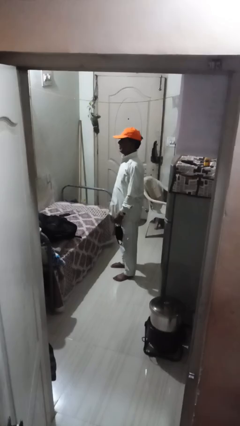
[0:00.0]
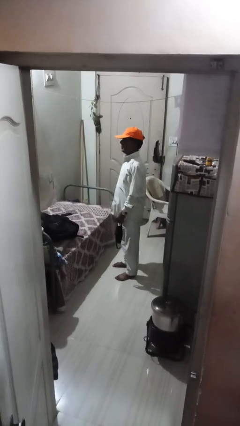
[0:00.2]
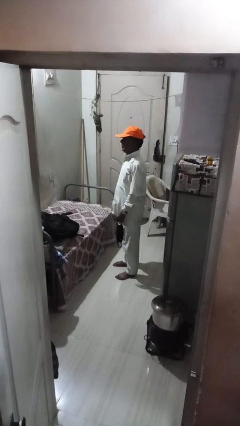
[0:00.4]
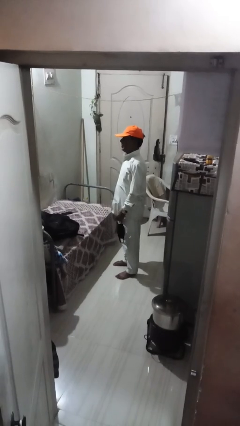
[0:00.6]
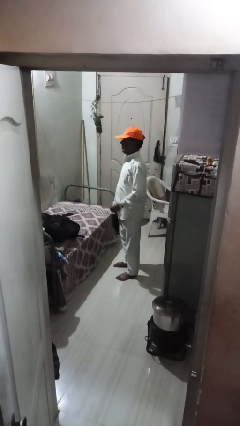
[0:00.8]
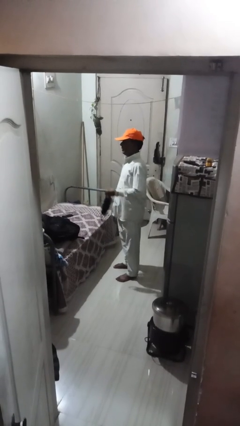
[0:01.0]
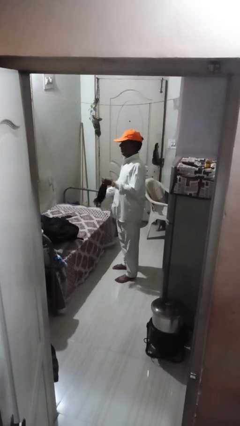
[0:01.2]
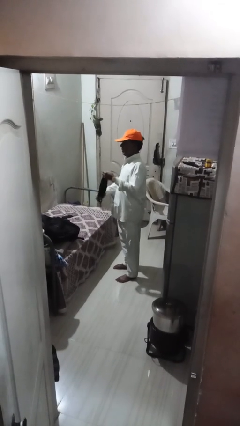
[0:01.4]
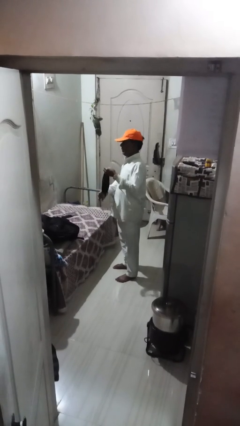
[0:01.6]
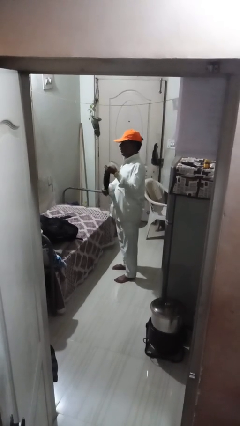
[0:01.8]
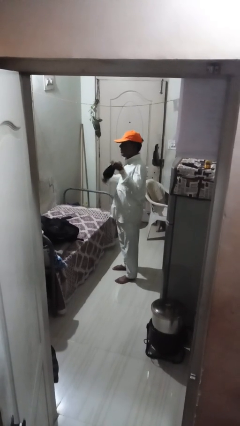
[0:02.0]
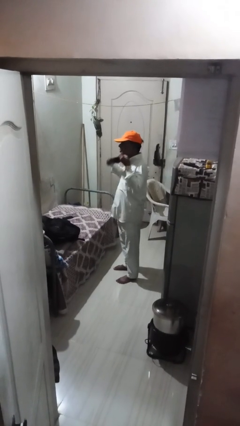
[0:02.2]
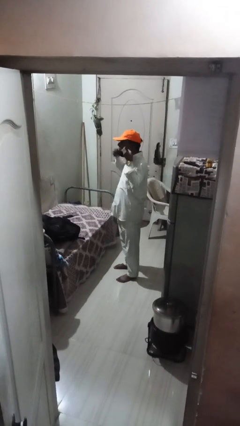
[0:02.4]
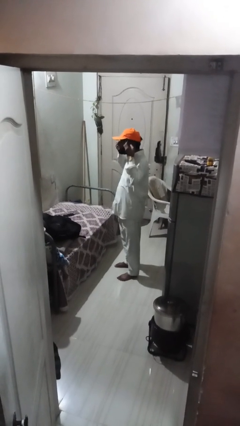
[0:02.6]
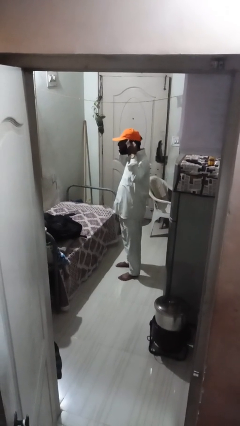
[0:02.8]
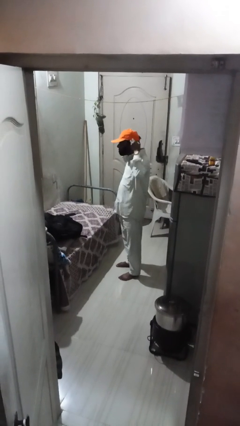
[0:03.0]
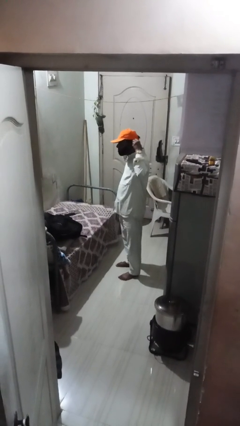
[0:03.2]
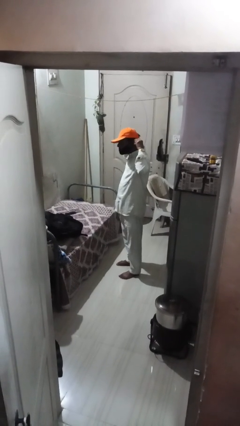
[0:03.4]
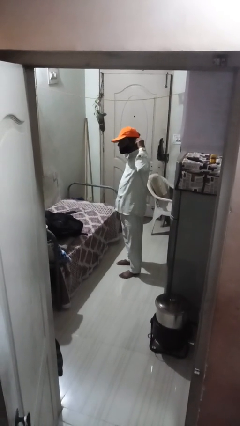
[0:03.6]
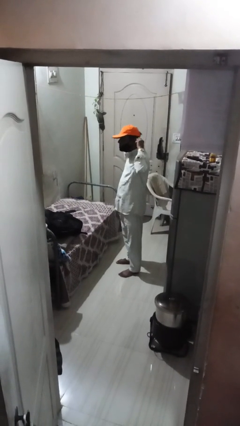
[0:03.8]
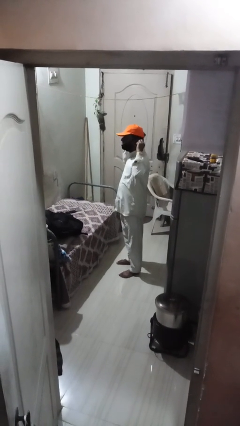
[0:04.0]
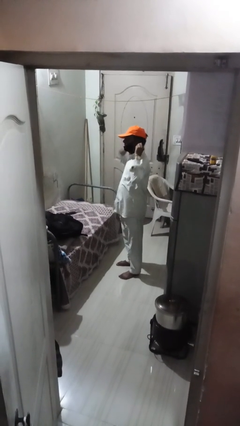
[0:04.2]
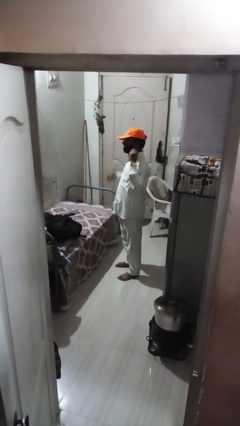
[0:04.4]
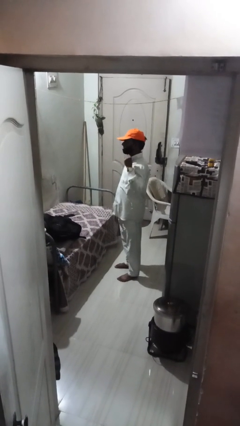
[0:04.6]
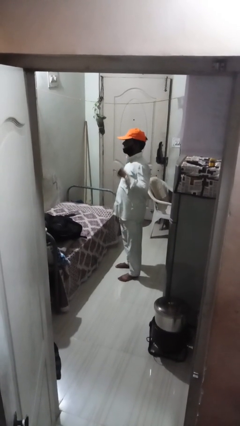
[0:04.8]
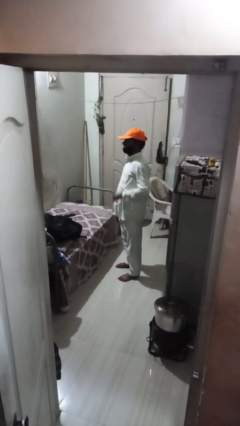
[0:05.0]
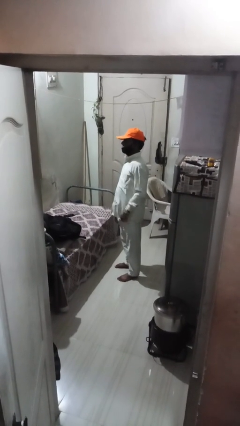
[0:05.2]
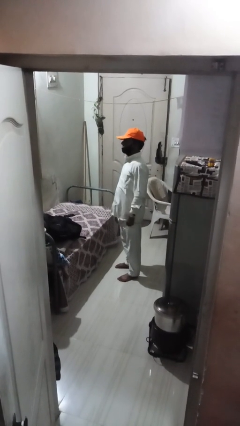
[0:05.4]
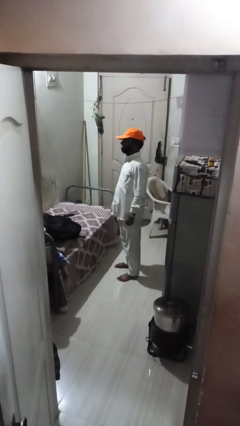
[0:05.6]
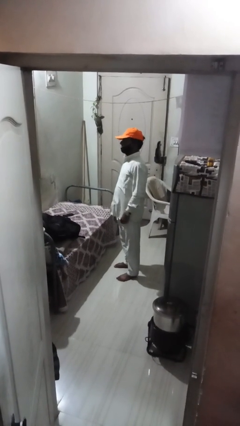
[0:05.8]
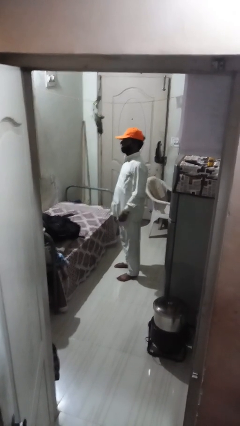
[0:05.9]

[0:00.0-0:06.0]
person puts on facemask

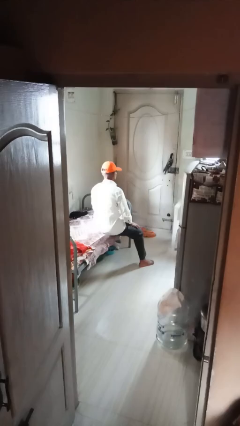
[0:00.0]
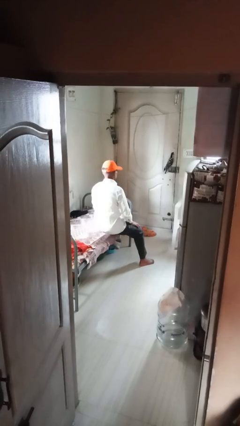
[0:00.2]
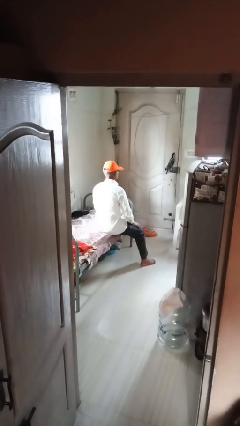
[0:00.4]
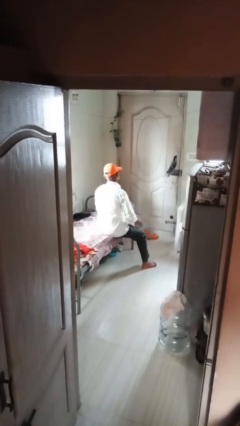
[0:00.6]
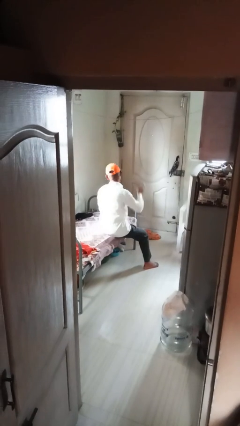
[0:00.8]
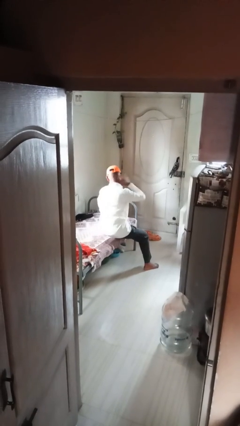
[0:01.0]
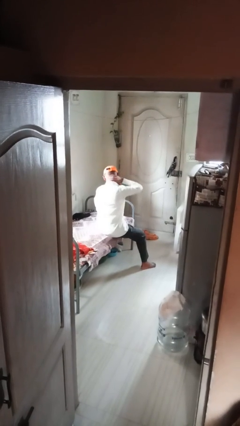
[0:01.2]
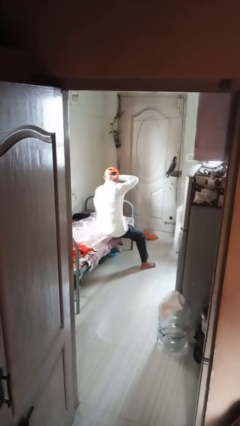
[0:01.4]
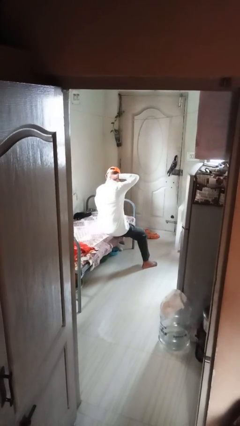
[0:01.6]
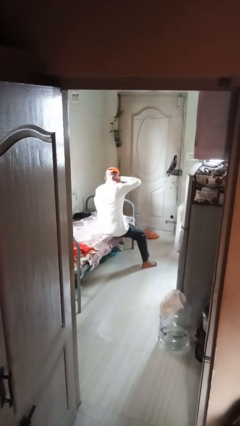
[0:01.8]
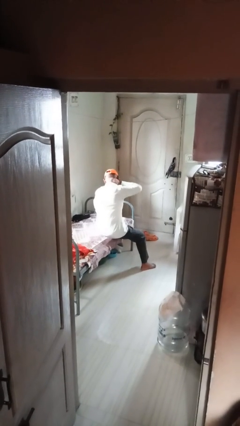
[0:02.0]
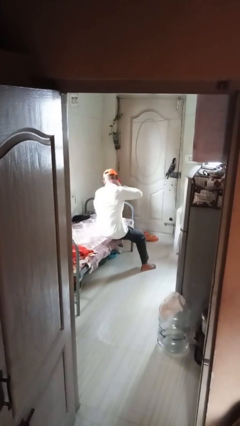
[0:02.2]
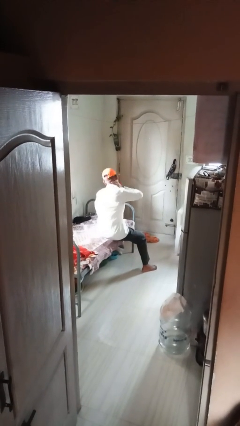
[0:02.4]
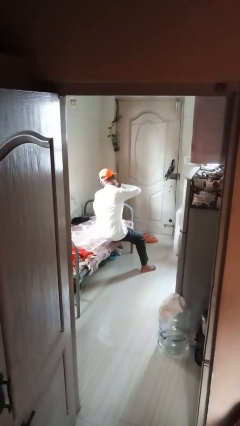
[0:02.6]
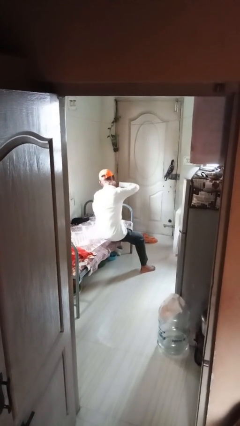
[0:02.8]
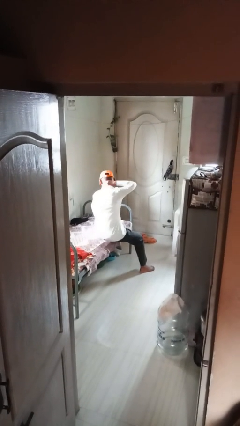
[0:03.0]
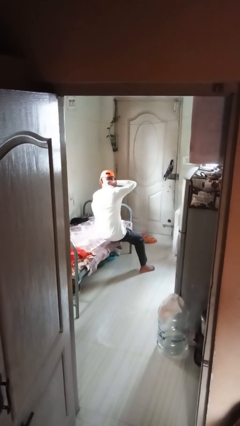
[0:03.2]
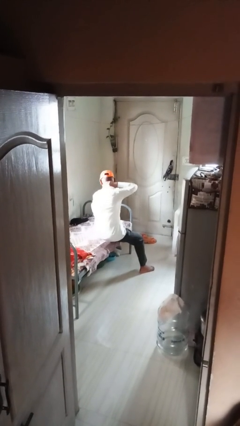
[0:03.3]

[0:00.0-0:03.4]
person rubs neck

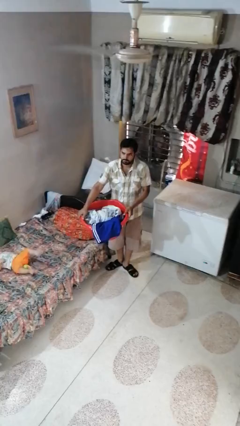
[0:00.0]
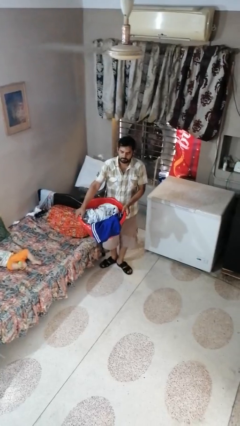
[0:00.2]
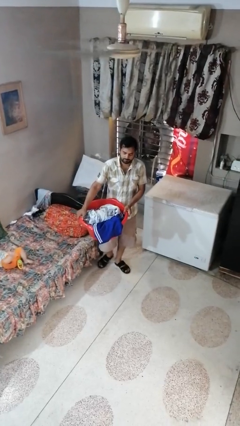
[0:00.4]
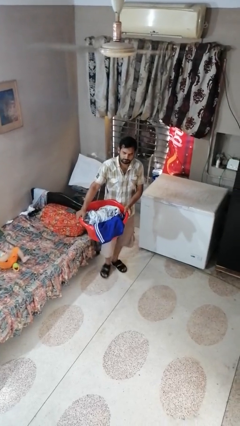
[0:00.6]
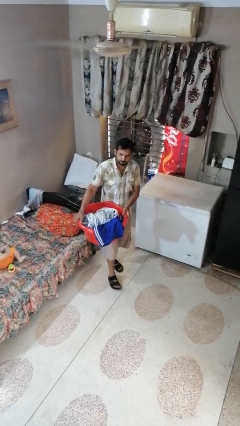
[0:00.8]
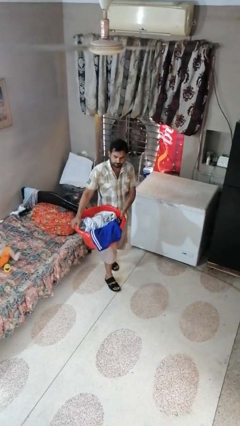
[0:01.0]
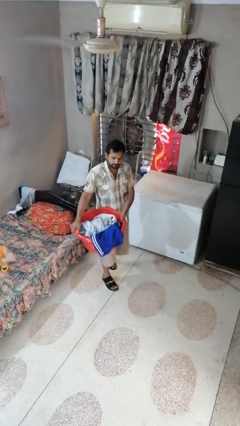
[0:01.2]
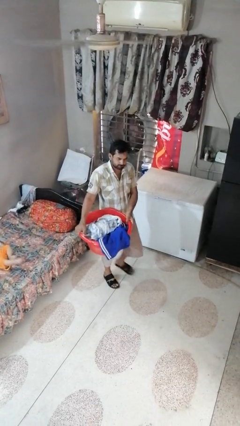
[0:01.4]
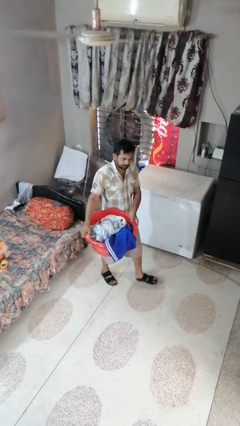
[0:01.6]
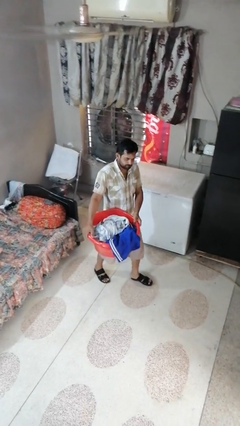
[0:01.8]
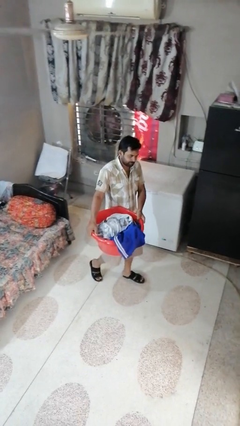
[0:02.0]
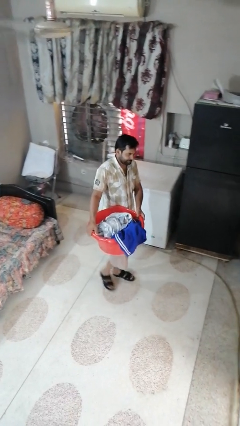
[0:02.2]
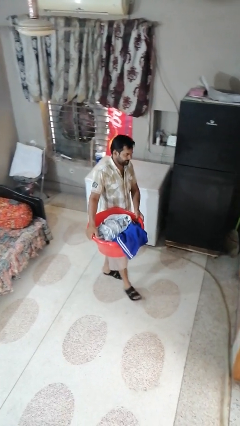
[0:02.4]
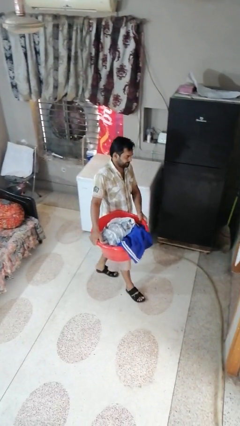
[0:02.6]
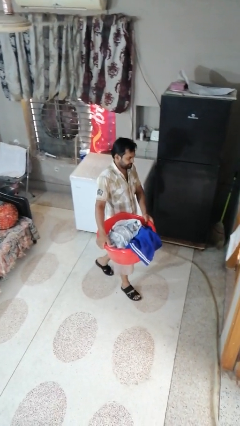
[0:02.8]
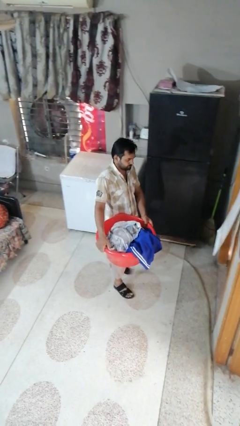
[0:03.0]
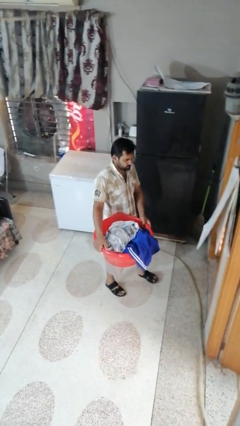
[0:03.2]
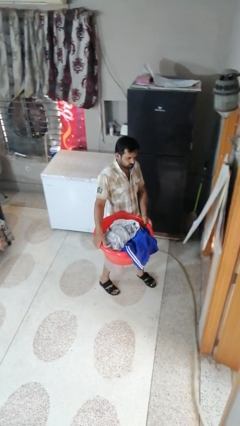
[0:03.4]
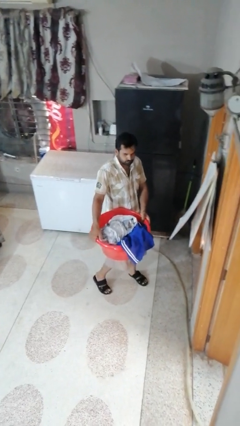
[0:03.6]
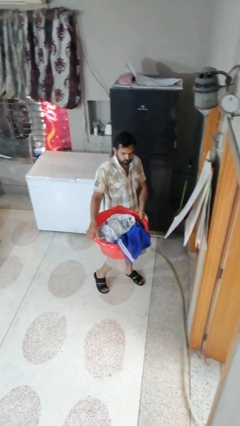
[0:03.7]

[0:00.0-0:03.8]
person carries laundry basket

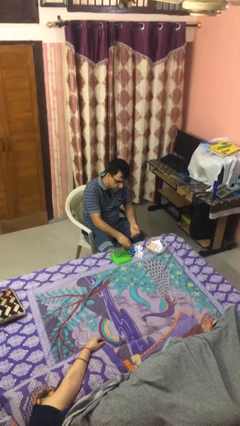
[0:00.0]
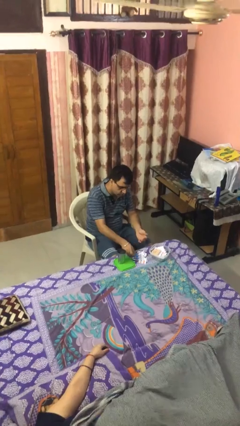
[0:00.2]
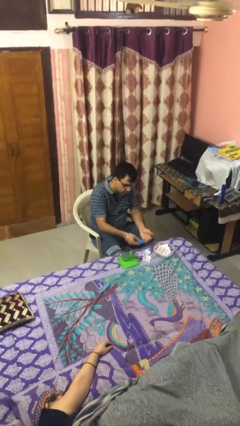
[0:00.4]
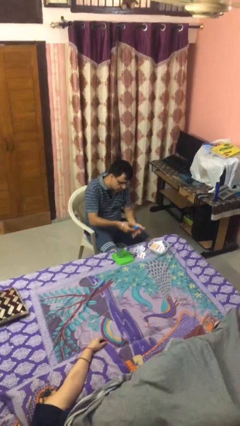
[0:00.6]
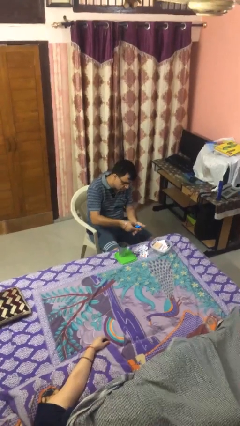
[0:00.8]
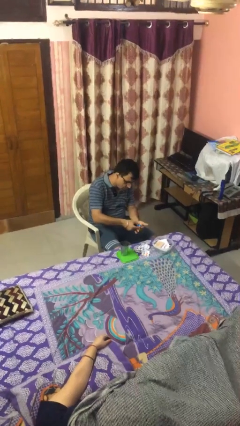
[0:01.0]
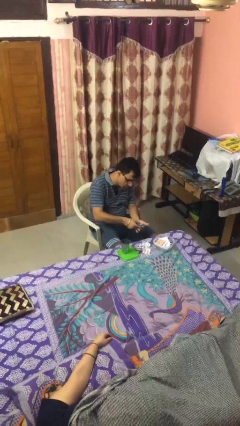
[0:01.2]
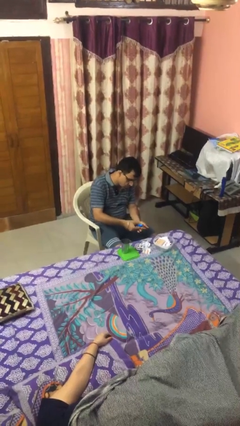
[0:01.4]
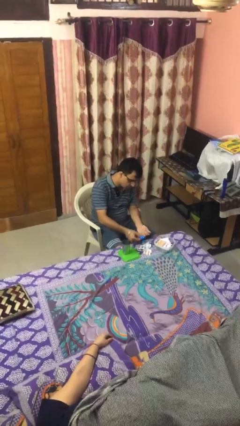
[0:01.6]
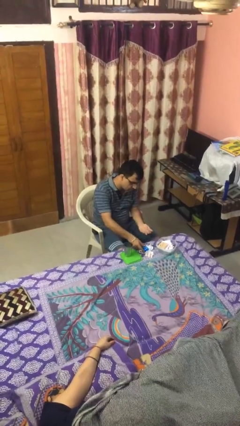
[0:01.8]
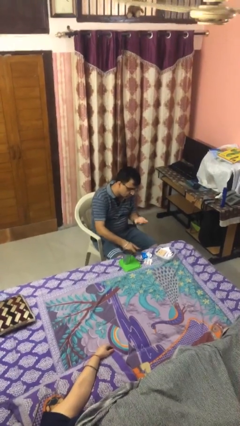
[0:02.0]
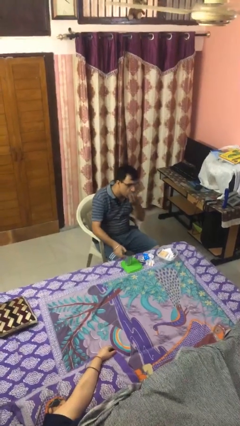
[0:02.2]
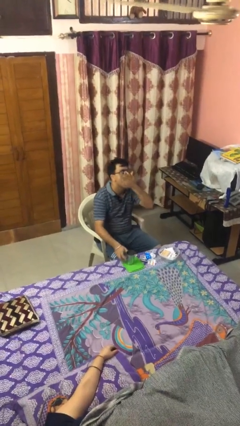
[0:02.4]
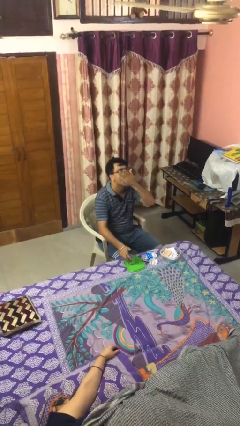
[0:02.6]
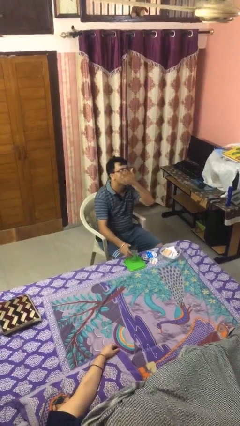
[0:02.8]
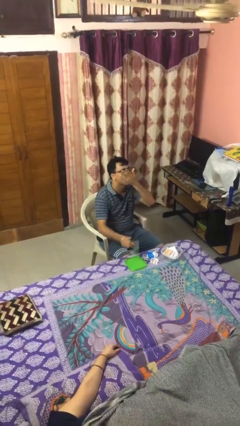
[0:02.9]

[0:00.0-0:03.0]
person takes medicine pills

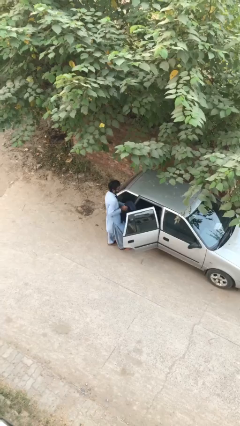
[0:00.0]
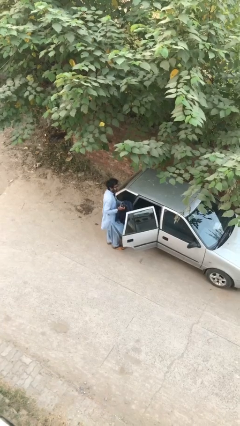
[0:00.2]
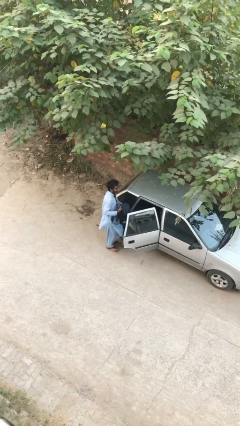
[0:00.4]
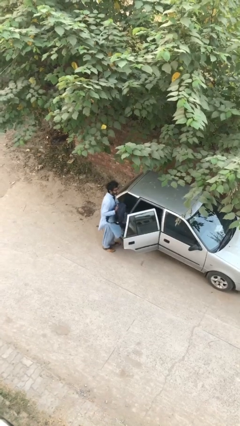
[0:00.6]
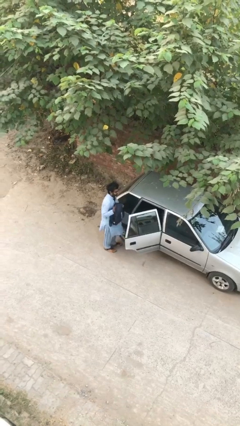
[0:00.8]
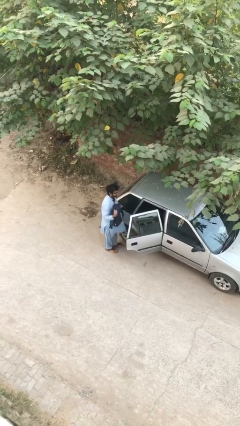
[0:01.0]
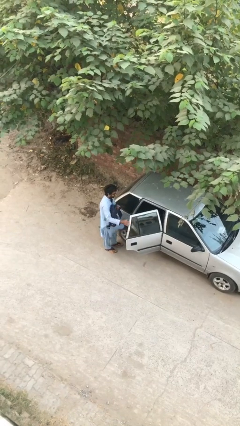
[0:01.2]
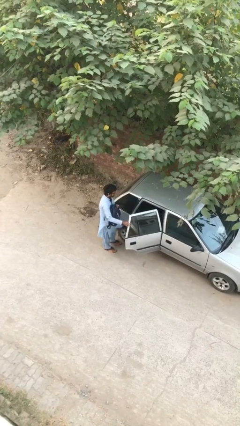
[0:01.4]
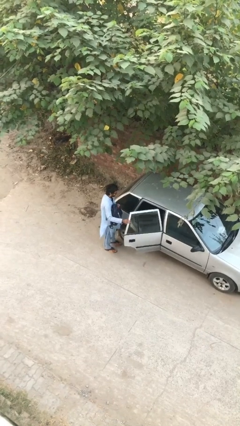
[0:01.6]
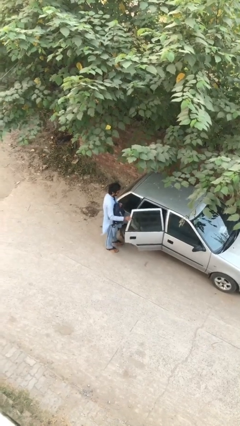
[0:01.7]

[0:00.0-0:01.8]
person closes car door
